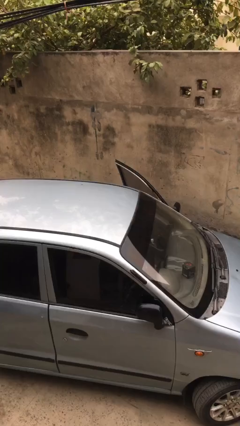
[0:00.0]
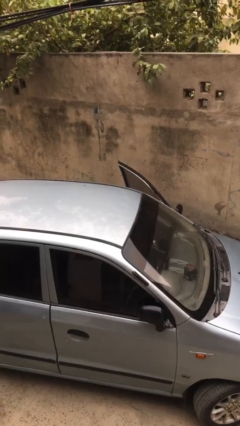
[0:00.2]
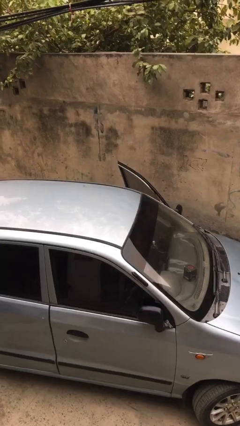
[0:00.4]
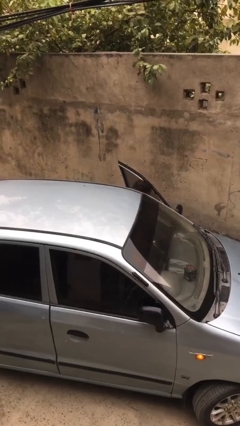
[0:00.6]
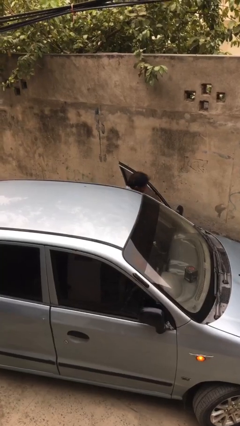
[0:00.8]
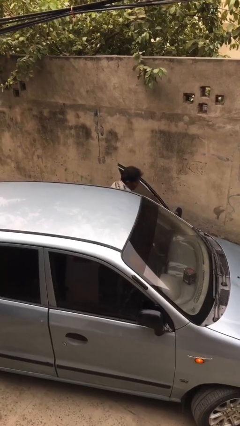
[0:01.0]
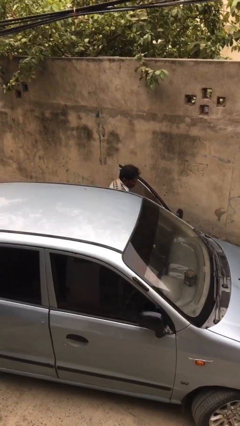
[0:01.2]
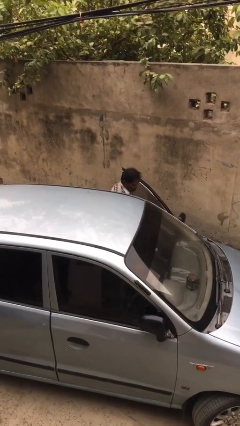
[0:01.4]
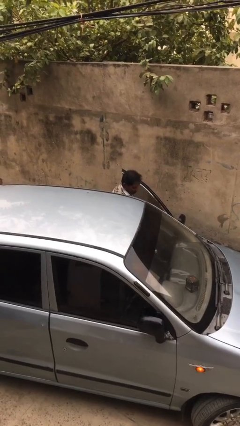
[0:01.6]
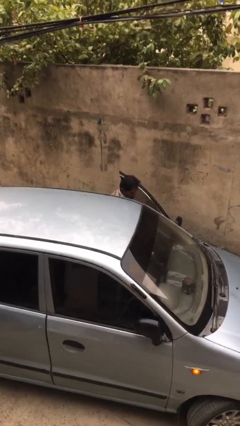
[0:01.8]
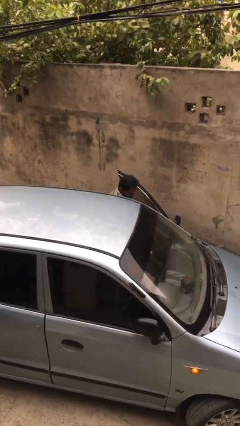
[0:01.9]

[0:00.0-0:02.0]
person exits car

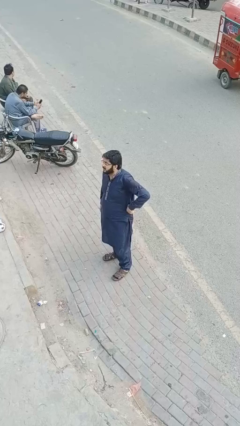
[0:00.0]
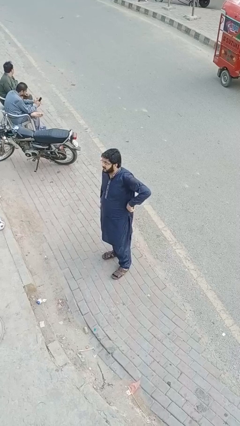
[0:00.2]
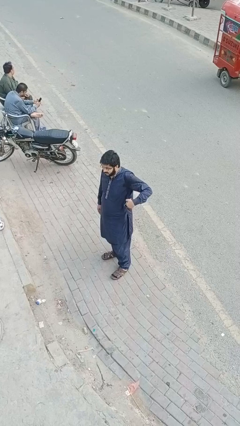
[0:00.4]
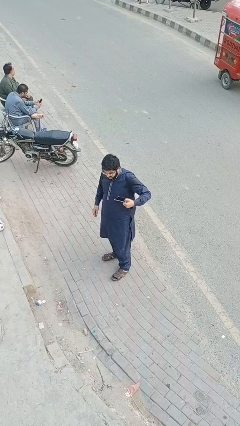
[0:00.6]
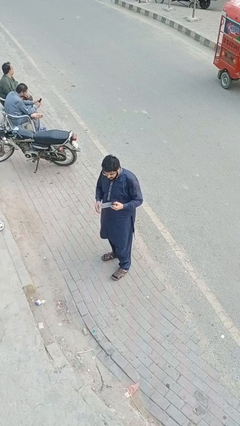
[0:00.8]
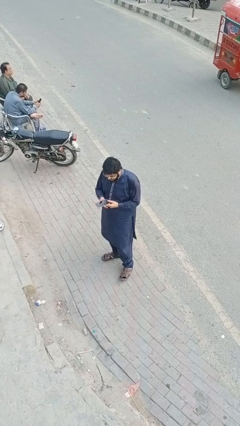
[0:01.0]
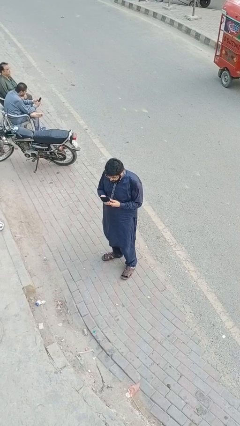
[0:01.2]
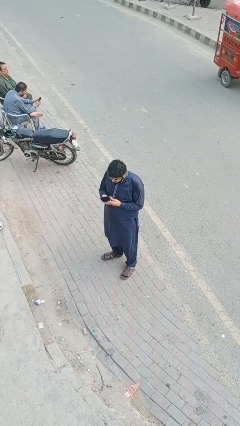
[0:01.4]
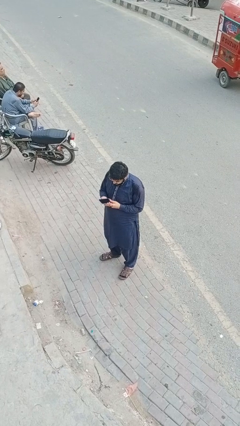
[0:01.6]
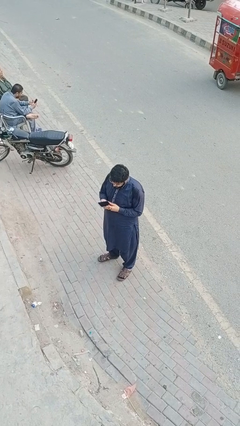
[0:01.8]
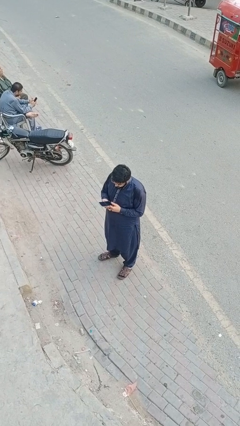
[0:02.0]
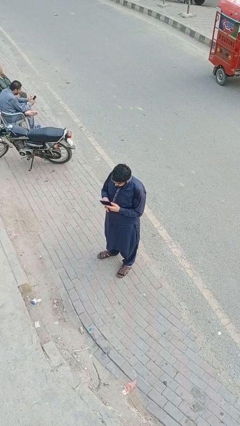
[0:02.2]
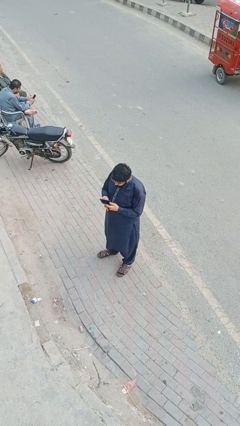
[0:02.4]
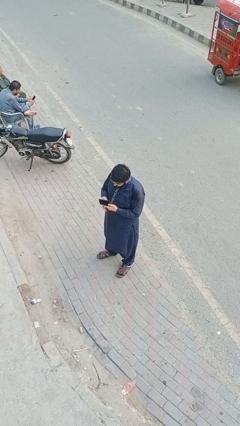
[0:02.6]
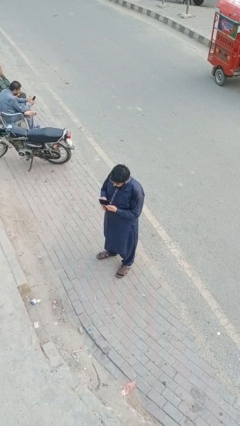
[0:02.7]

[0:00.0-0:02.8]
person takes phone from pocket

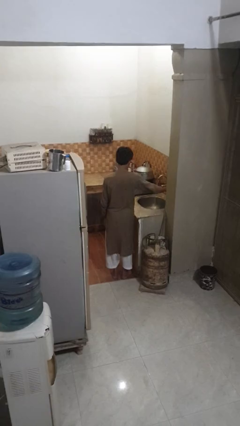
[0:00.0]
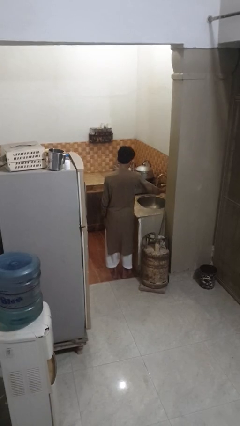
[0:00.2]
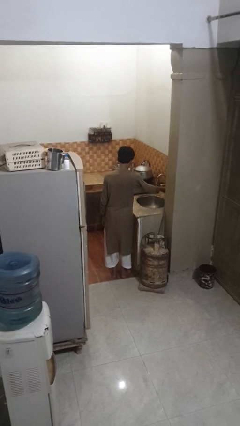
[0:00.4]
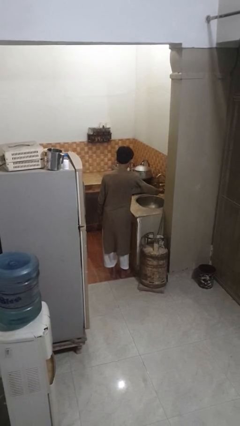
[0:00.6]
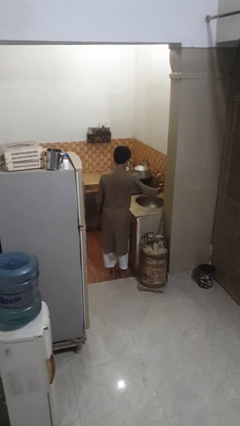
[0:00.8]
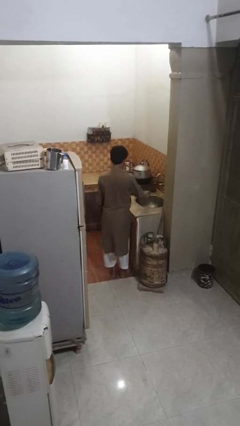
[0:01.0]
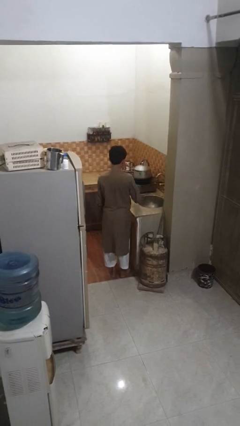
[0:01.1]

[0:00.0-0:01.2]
person turns off faucet

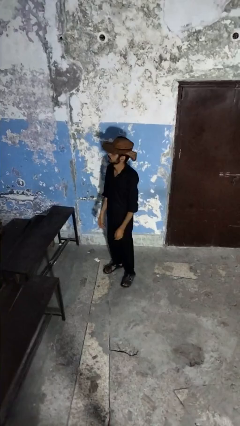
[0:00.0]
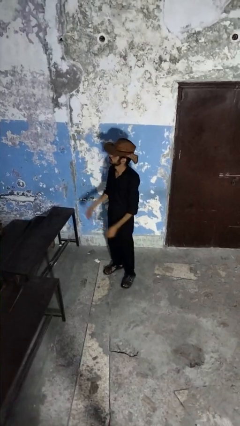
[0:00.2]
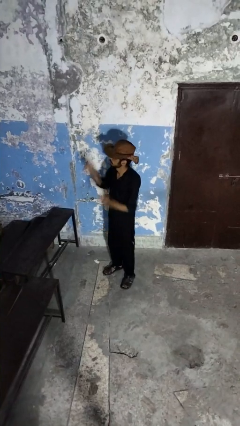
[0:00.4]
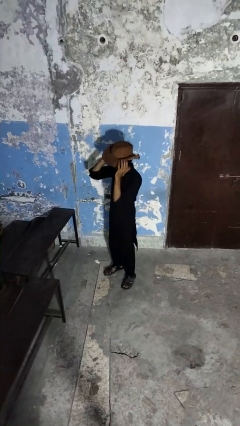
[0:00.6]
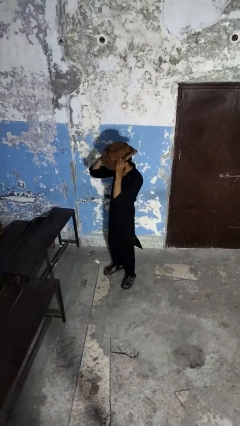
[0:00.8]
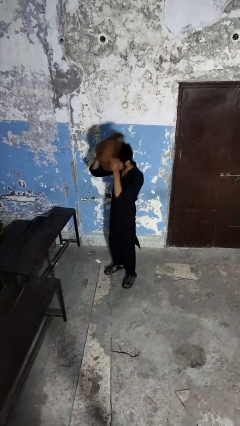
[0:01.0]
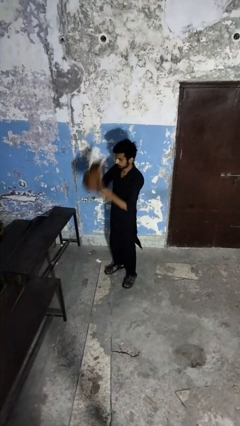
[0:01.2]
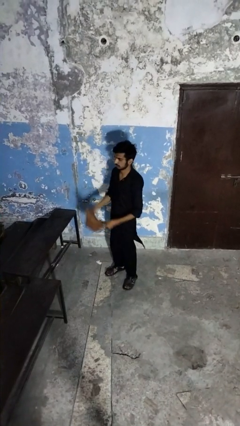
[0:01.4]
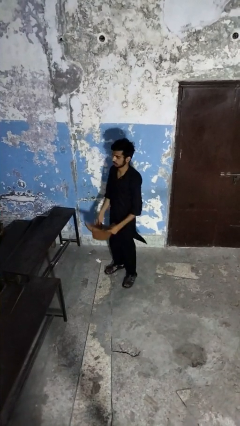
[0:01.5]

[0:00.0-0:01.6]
person takes off hat

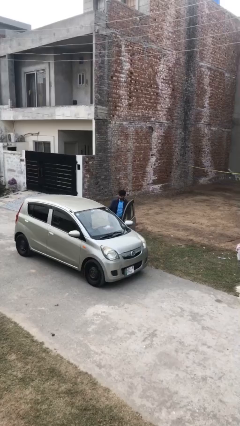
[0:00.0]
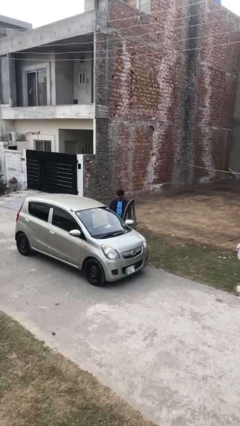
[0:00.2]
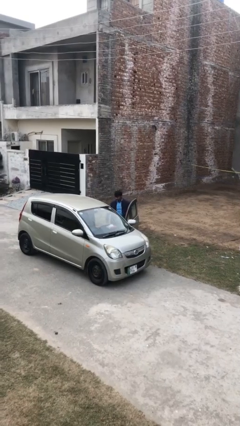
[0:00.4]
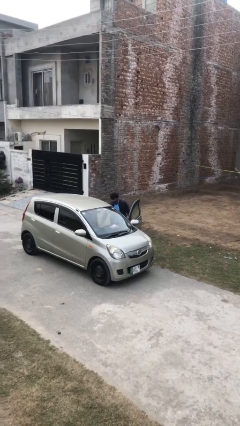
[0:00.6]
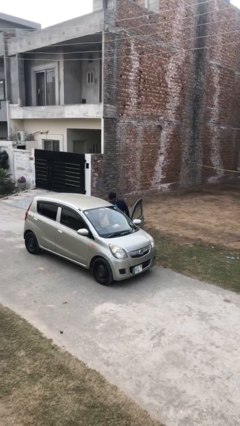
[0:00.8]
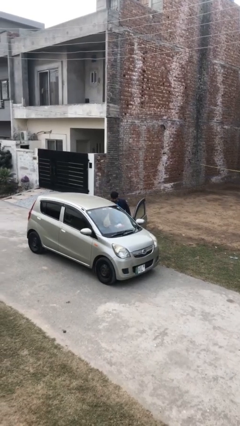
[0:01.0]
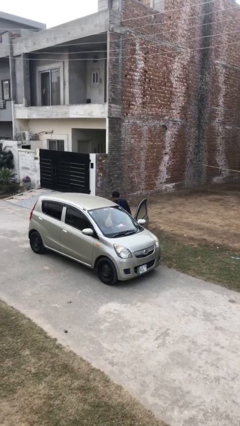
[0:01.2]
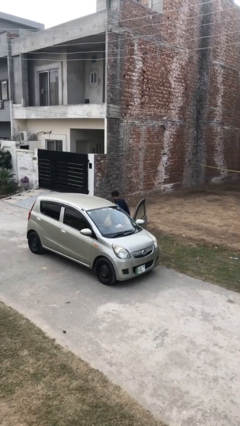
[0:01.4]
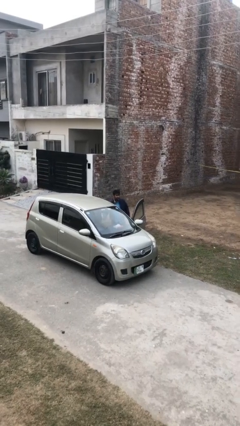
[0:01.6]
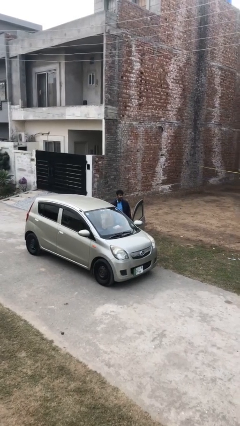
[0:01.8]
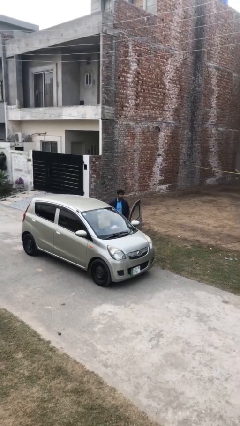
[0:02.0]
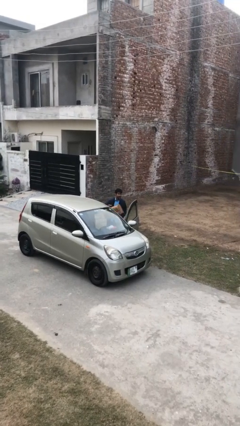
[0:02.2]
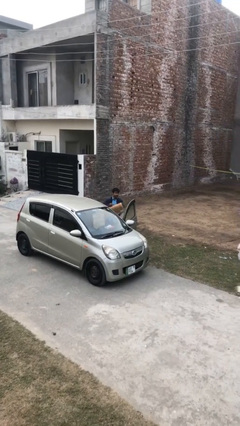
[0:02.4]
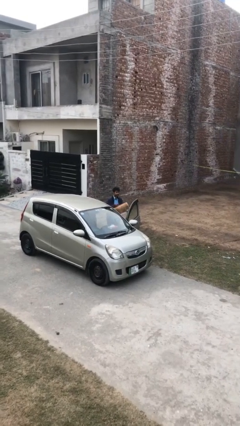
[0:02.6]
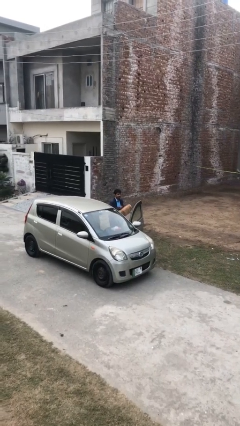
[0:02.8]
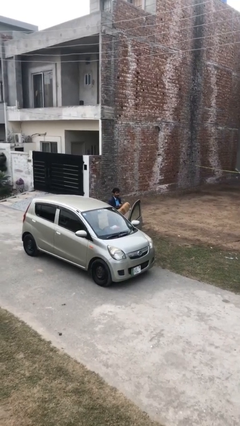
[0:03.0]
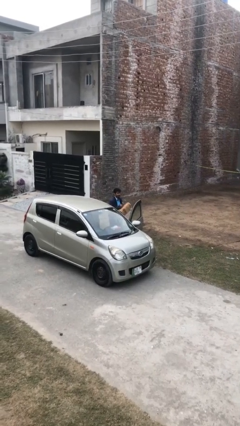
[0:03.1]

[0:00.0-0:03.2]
person unloads car

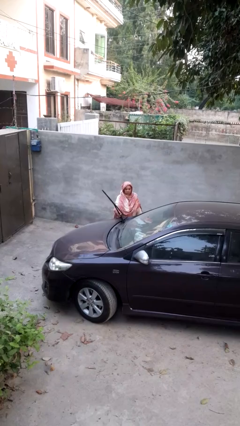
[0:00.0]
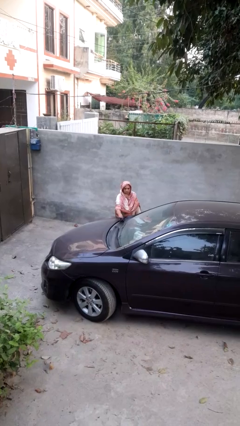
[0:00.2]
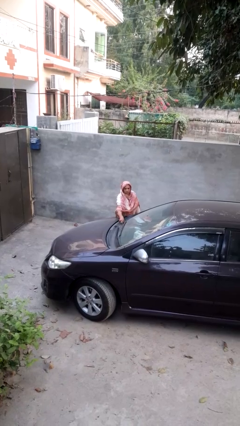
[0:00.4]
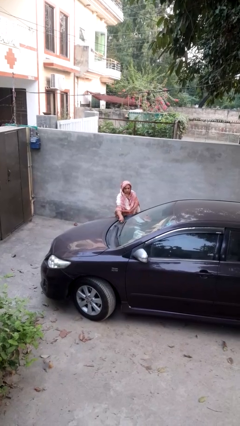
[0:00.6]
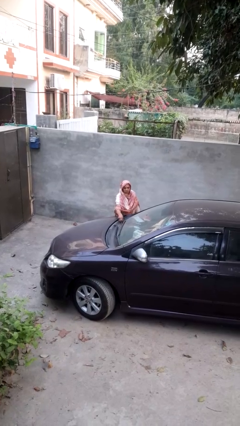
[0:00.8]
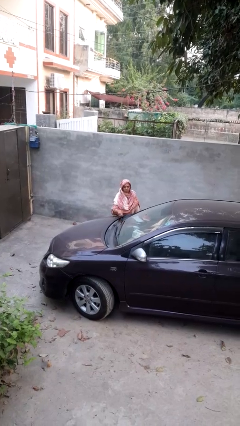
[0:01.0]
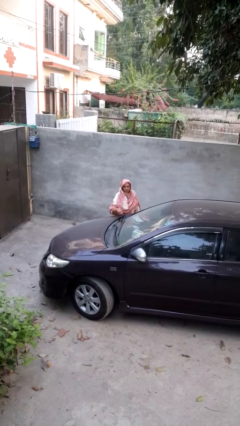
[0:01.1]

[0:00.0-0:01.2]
person flips down car wipers

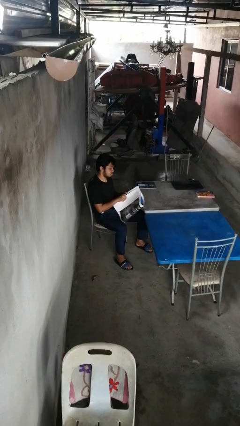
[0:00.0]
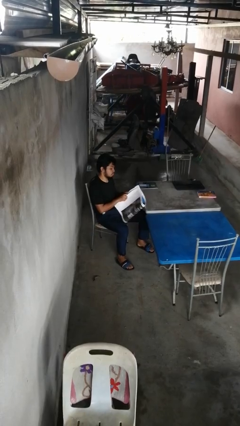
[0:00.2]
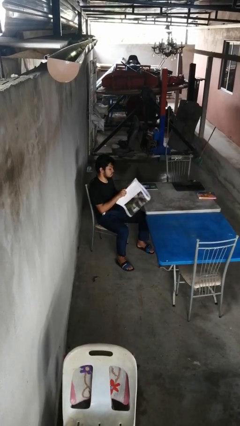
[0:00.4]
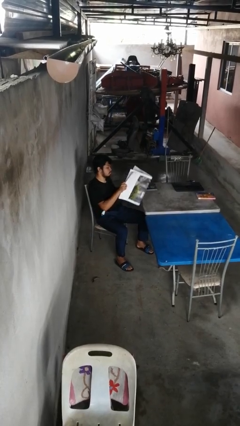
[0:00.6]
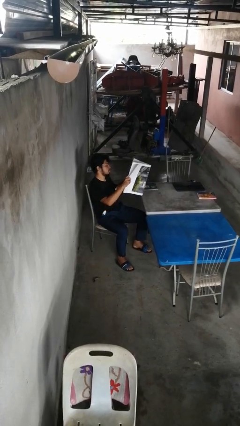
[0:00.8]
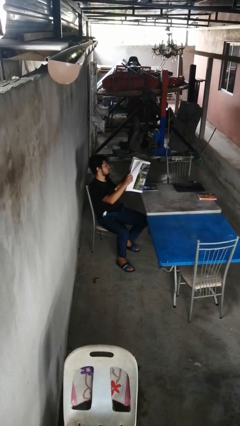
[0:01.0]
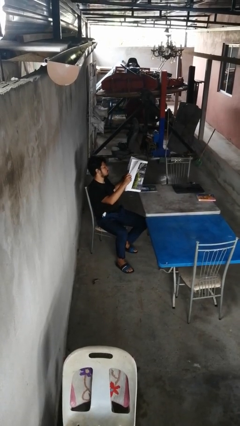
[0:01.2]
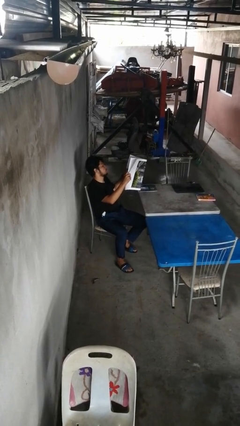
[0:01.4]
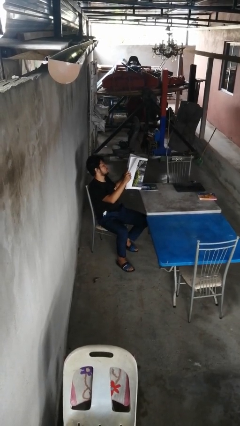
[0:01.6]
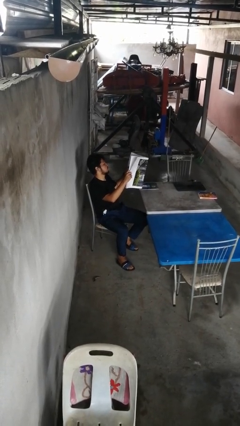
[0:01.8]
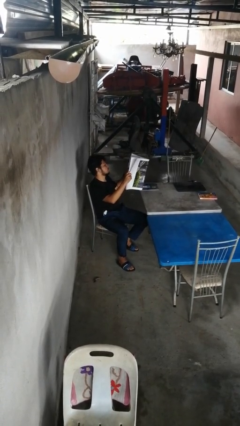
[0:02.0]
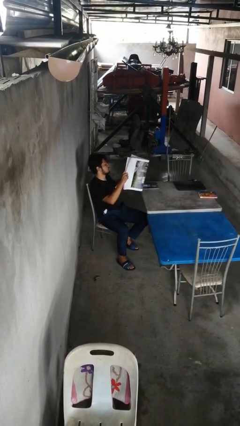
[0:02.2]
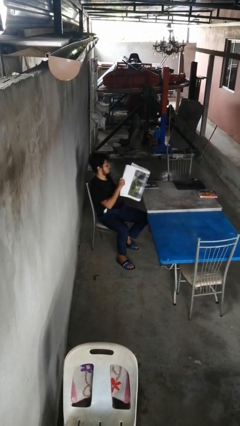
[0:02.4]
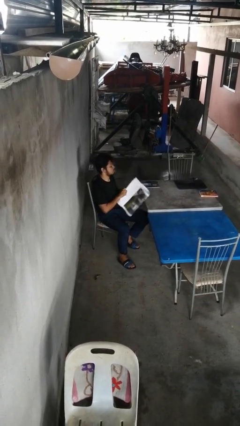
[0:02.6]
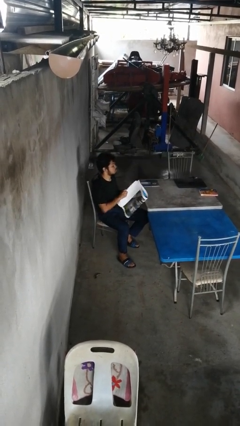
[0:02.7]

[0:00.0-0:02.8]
person reads newspaper

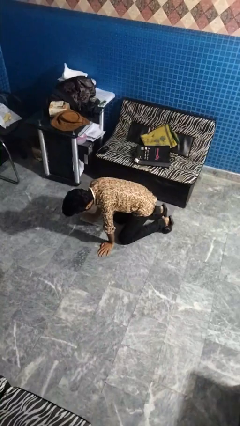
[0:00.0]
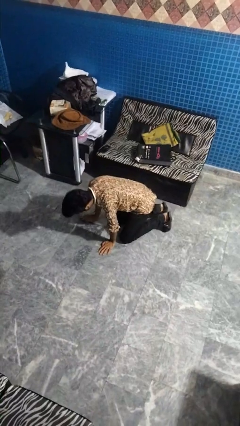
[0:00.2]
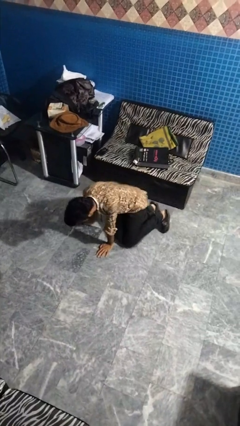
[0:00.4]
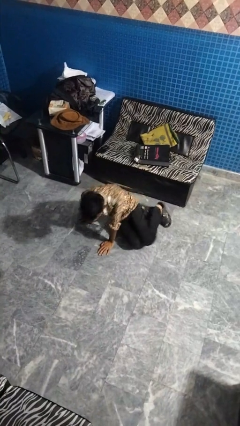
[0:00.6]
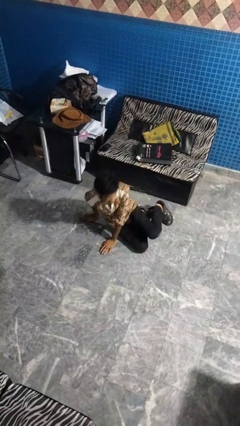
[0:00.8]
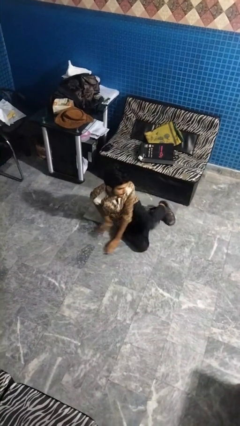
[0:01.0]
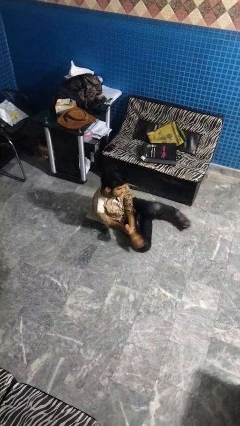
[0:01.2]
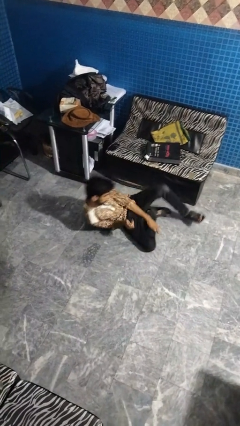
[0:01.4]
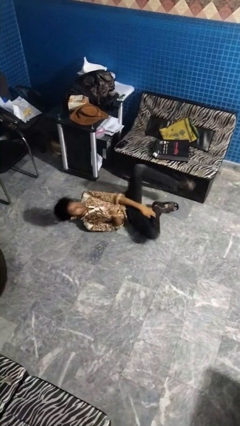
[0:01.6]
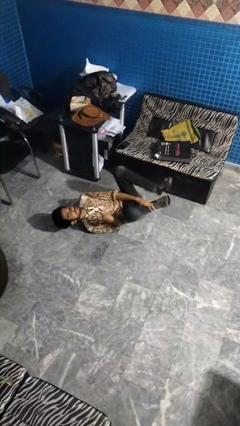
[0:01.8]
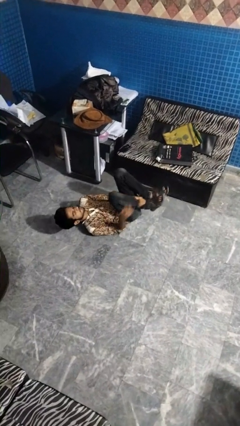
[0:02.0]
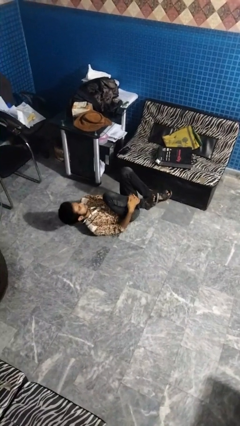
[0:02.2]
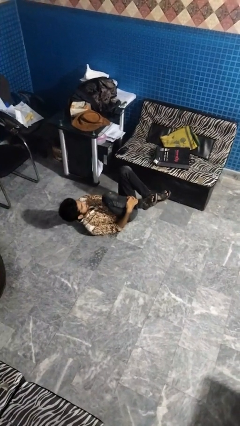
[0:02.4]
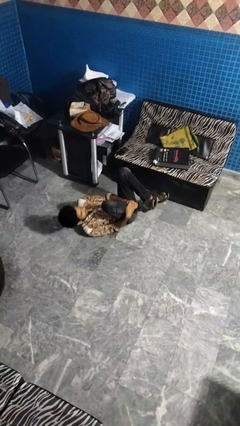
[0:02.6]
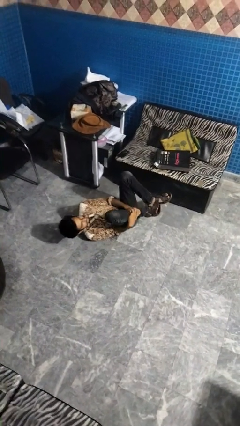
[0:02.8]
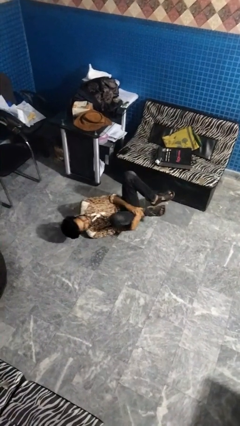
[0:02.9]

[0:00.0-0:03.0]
person lies down on floor
